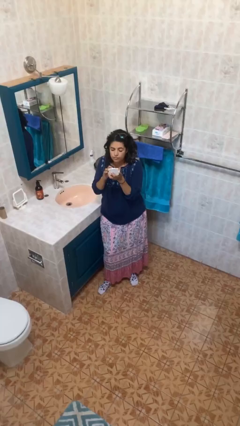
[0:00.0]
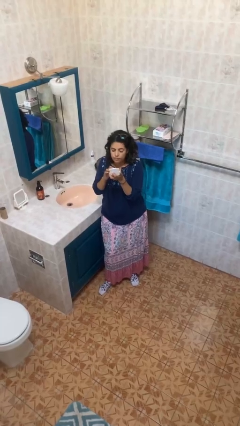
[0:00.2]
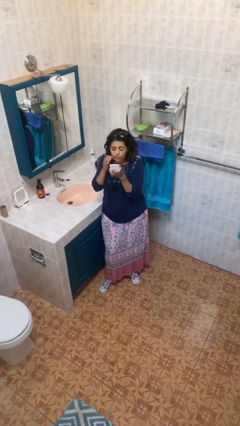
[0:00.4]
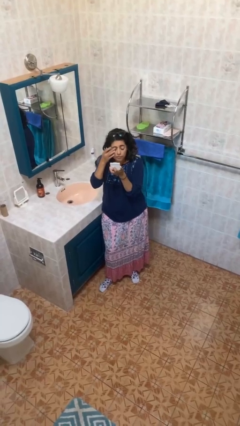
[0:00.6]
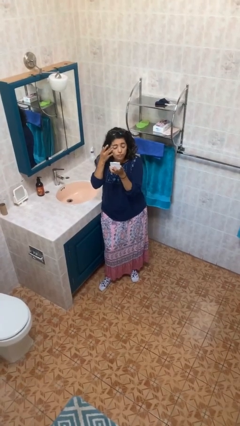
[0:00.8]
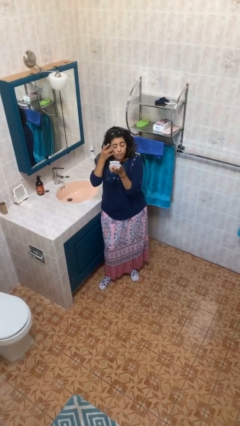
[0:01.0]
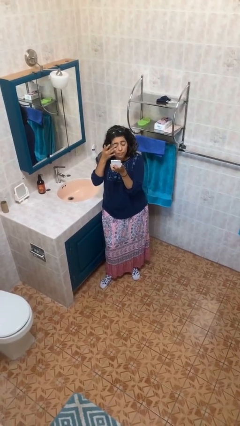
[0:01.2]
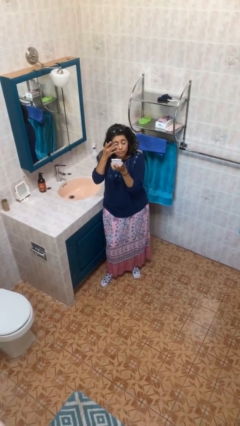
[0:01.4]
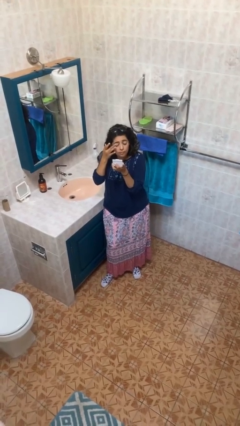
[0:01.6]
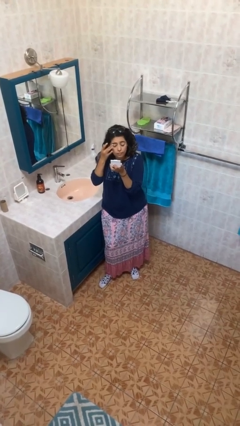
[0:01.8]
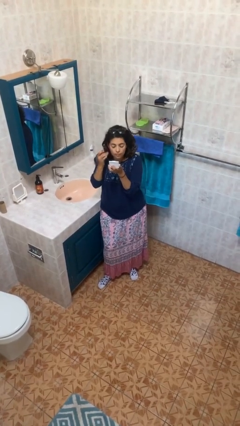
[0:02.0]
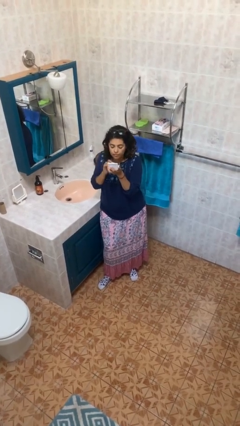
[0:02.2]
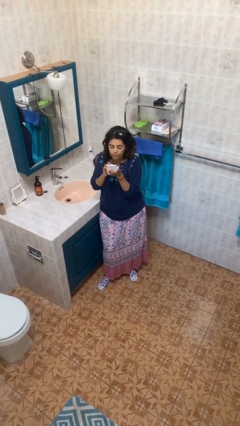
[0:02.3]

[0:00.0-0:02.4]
person applies eye makeup

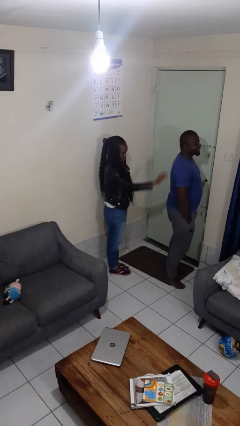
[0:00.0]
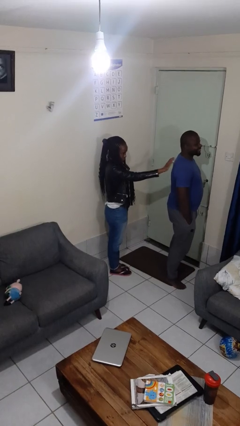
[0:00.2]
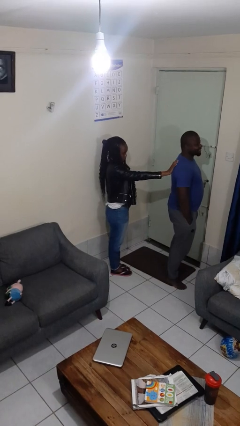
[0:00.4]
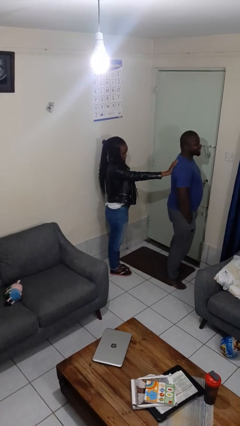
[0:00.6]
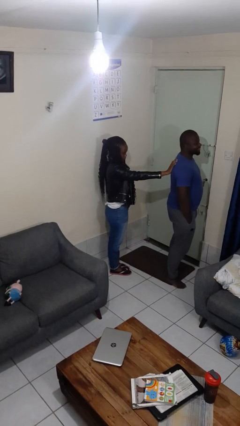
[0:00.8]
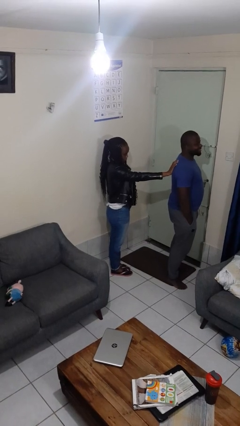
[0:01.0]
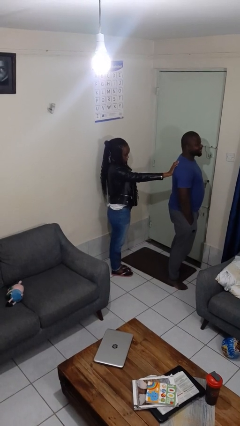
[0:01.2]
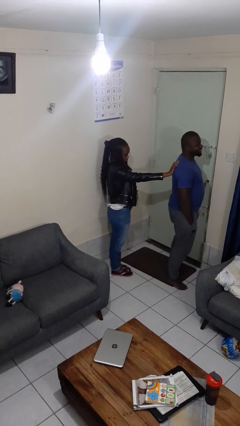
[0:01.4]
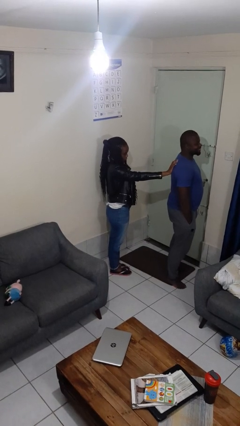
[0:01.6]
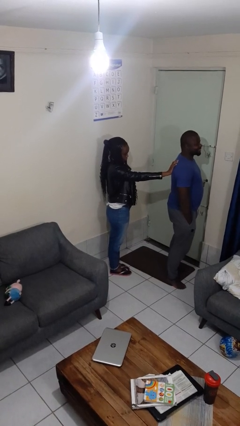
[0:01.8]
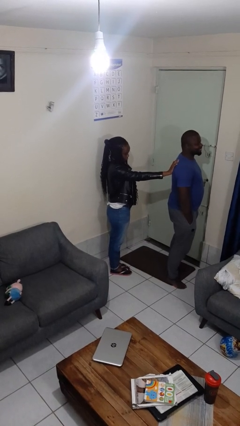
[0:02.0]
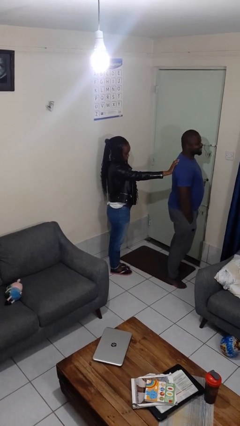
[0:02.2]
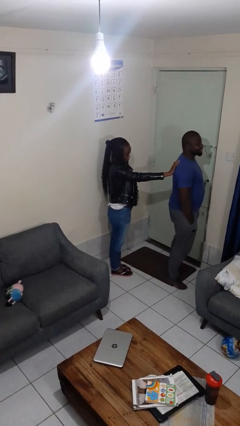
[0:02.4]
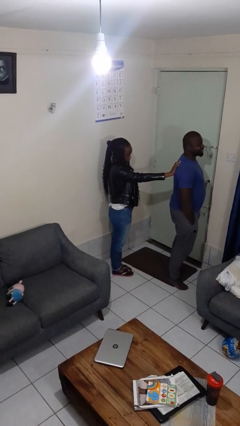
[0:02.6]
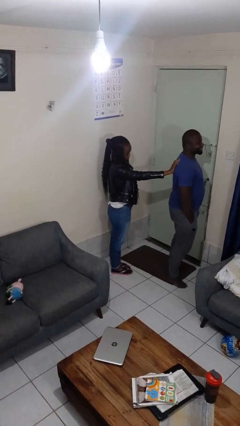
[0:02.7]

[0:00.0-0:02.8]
person touches back of person

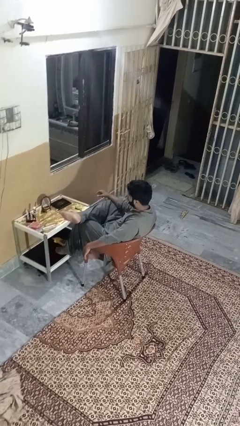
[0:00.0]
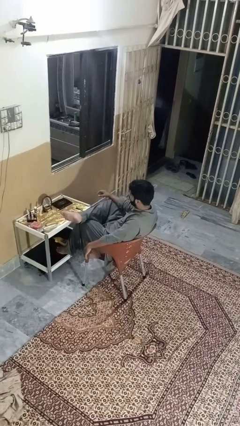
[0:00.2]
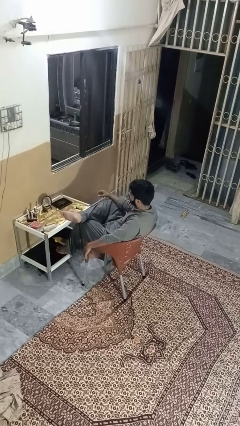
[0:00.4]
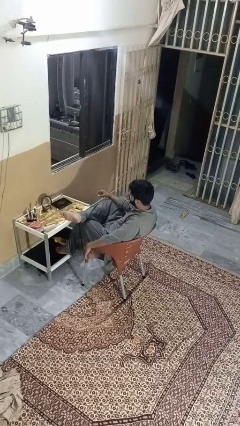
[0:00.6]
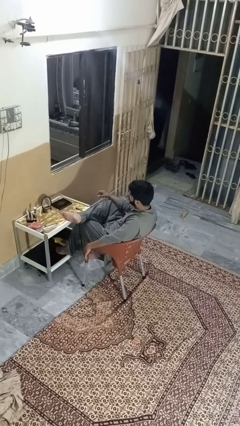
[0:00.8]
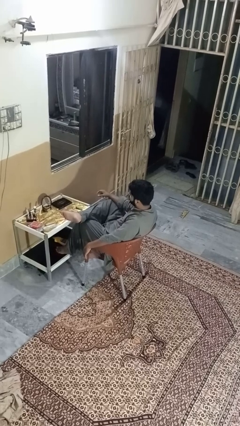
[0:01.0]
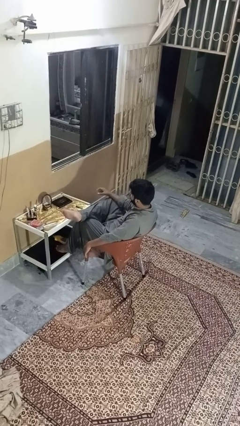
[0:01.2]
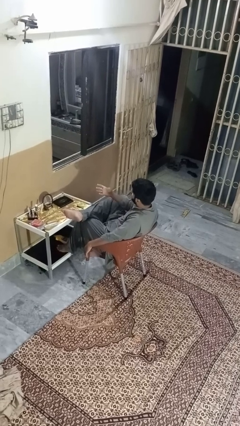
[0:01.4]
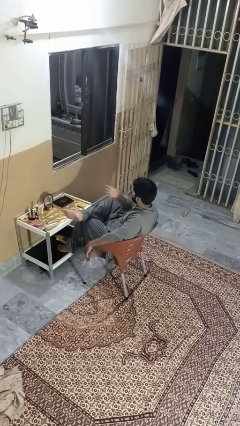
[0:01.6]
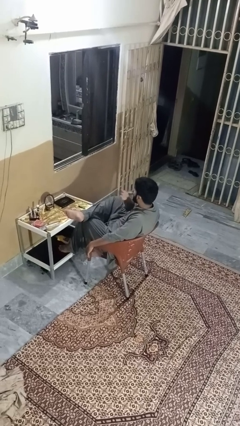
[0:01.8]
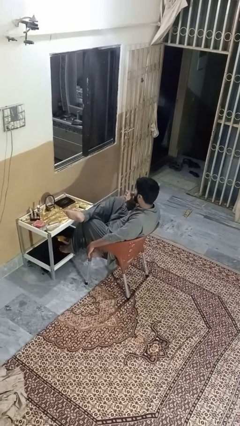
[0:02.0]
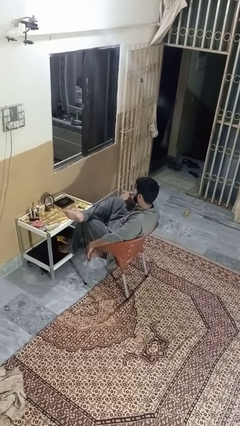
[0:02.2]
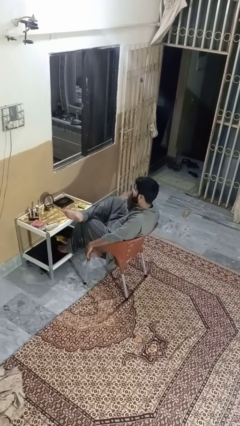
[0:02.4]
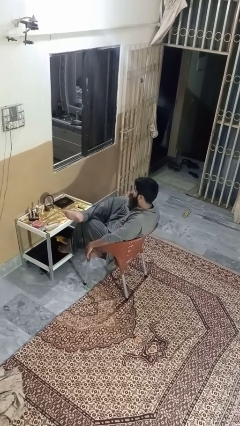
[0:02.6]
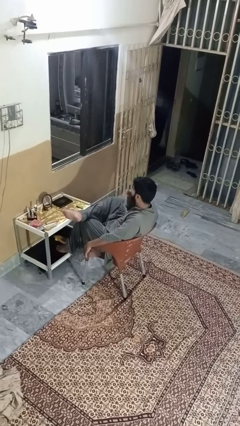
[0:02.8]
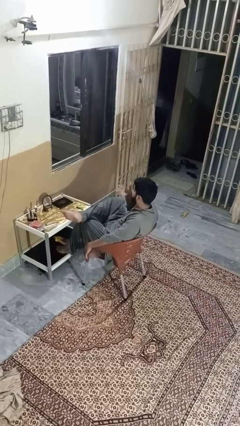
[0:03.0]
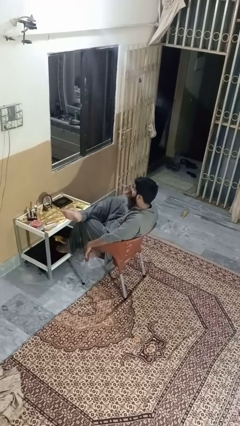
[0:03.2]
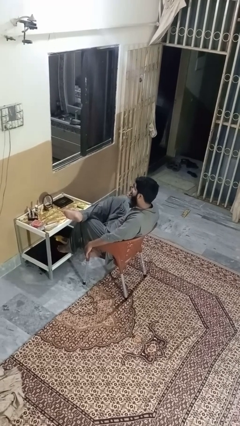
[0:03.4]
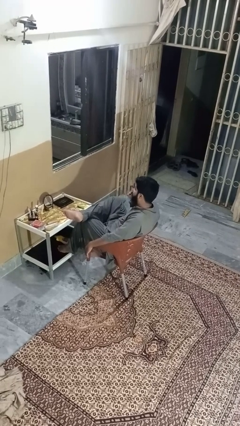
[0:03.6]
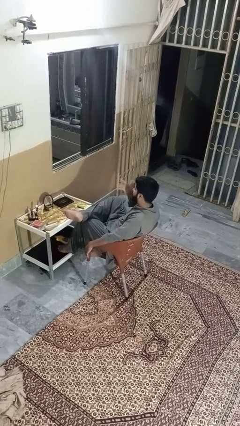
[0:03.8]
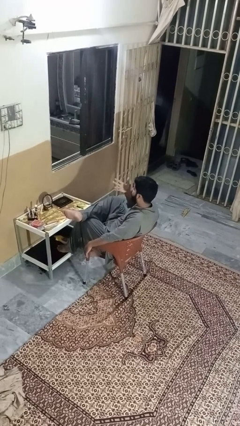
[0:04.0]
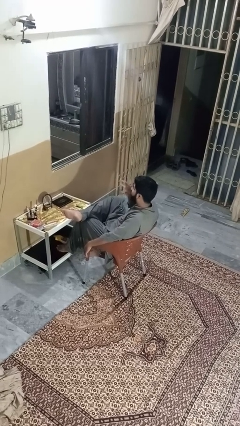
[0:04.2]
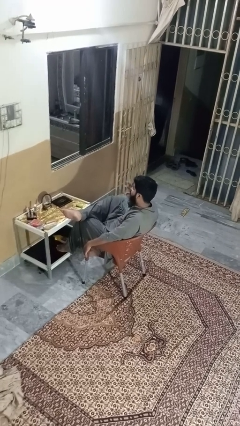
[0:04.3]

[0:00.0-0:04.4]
person licks fingers

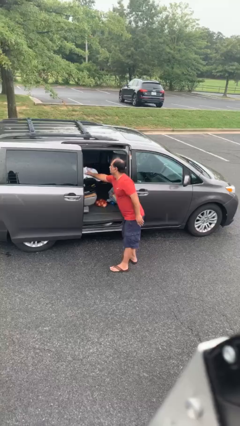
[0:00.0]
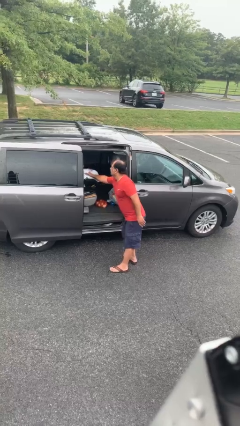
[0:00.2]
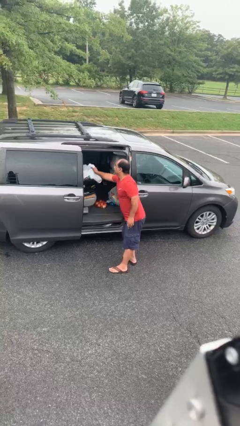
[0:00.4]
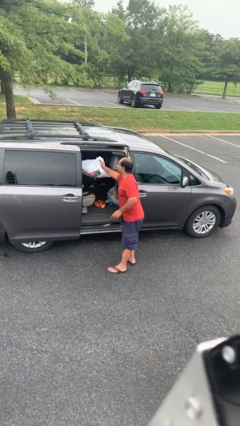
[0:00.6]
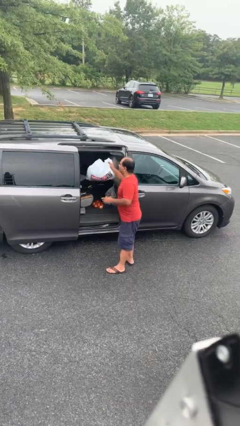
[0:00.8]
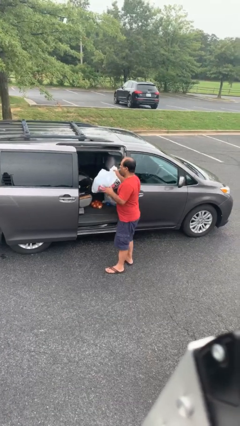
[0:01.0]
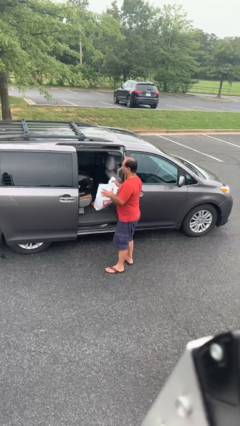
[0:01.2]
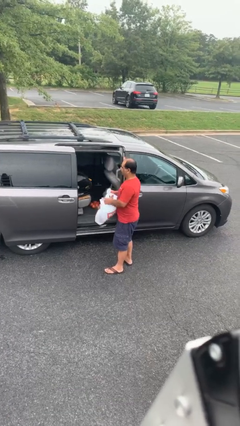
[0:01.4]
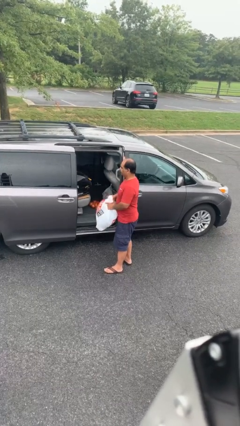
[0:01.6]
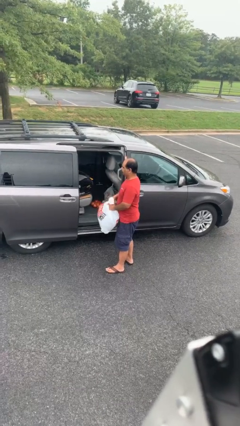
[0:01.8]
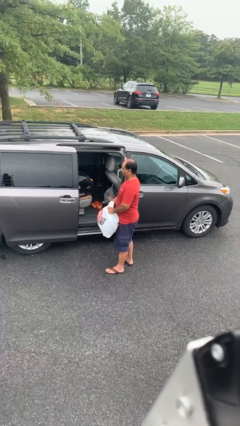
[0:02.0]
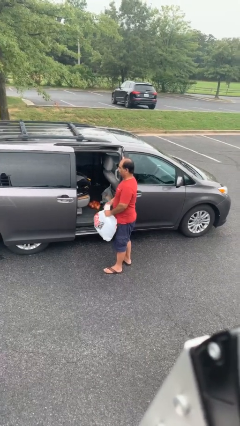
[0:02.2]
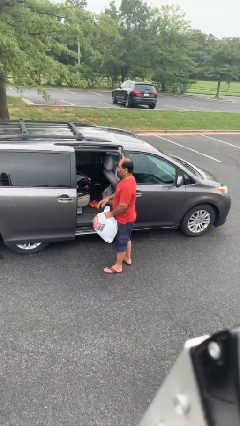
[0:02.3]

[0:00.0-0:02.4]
person unloads car

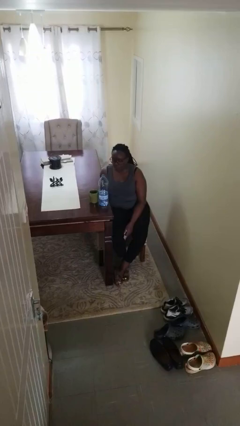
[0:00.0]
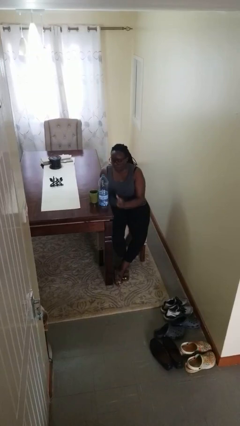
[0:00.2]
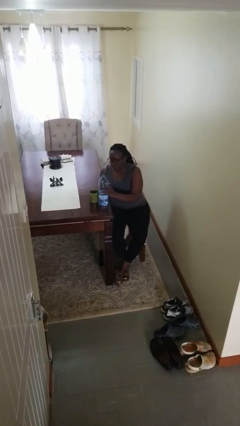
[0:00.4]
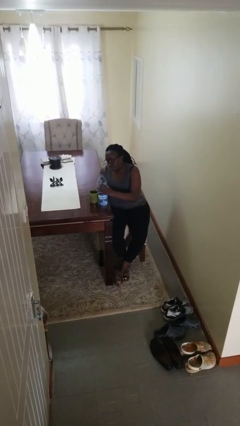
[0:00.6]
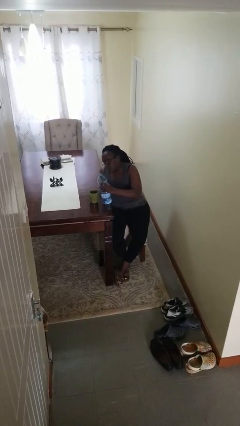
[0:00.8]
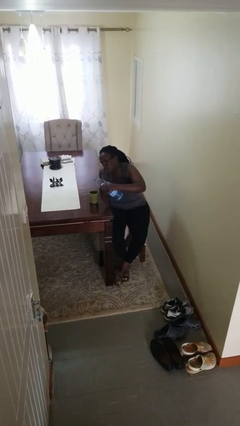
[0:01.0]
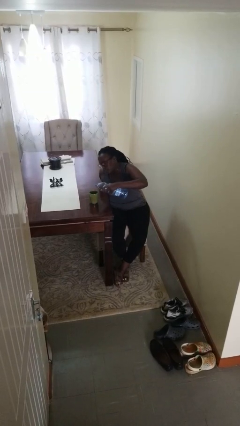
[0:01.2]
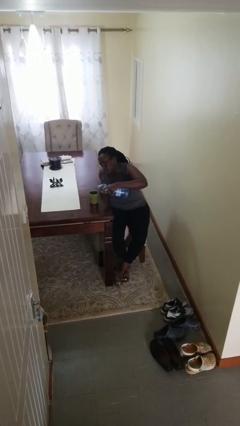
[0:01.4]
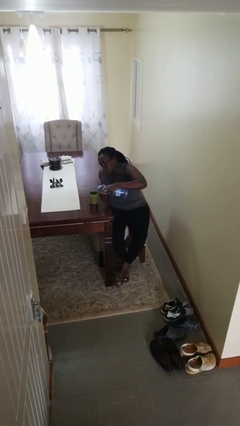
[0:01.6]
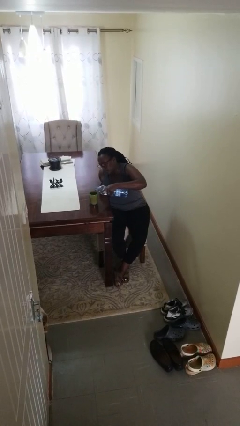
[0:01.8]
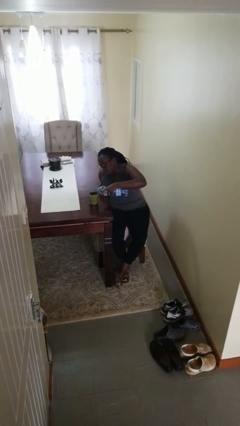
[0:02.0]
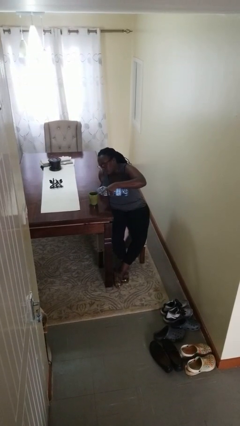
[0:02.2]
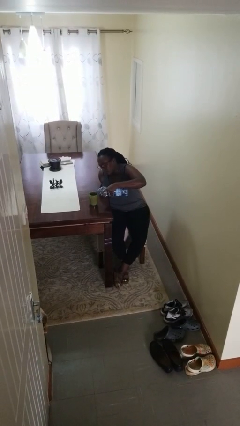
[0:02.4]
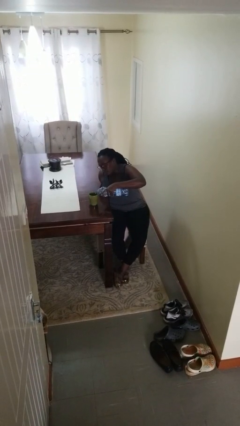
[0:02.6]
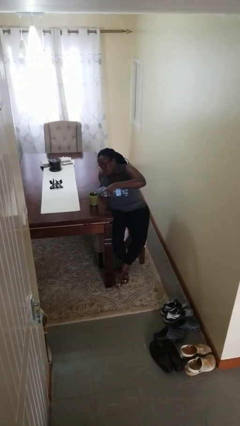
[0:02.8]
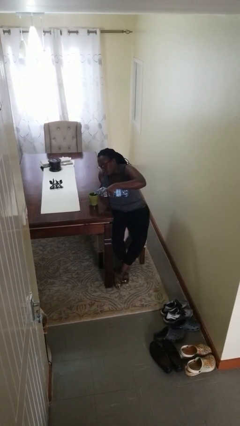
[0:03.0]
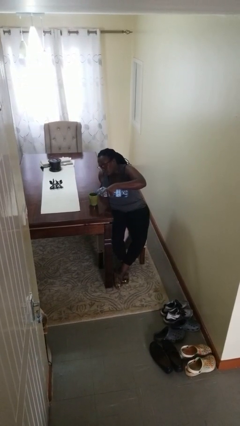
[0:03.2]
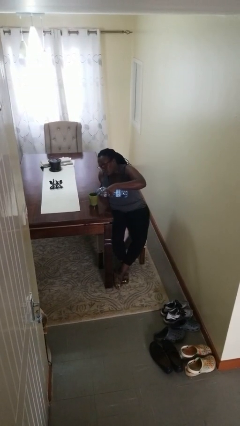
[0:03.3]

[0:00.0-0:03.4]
person pours liquid into cup

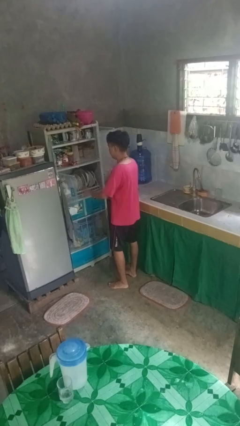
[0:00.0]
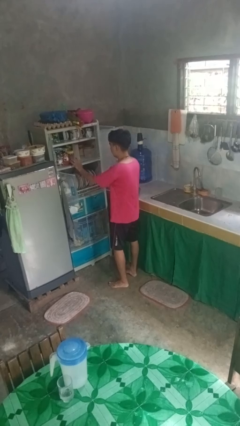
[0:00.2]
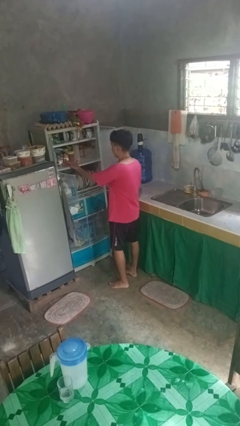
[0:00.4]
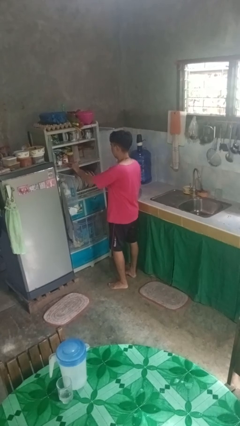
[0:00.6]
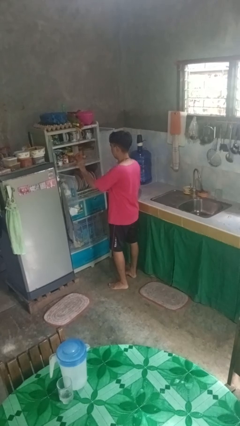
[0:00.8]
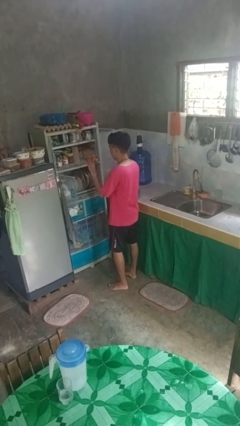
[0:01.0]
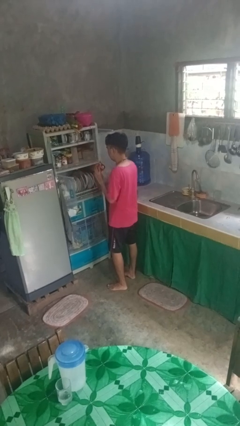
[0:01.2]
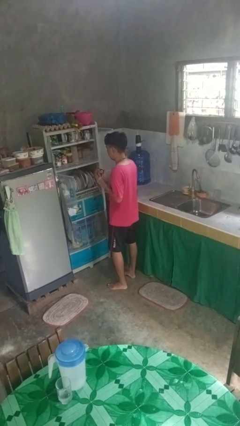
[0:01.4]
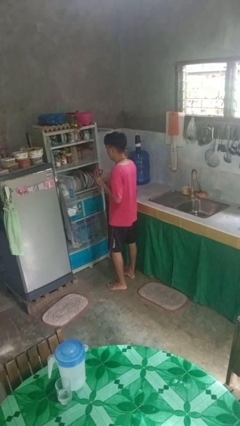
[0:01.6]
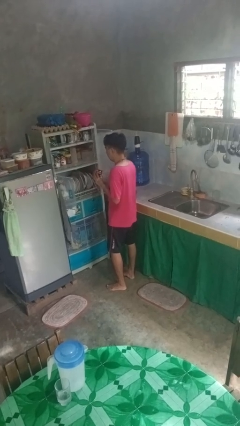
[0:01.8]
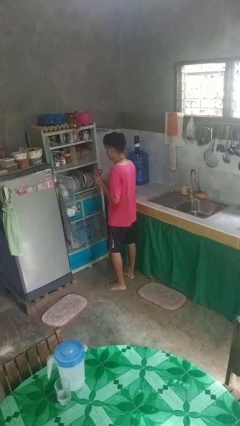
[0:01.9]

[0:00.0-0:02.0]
person takes object from cabinet
